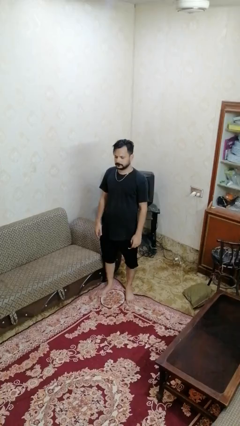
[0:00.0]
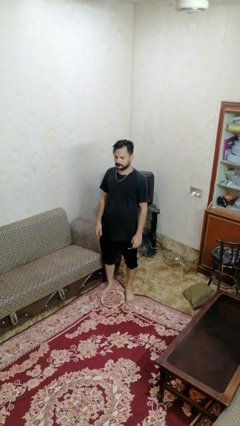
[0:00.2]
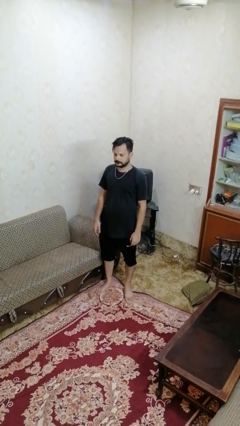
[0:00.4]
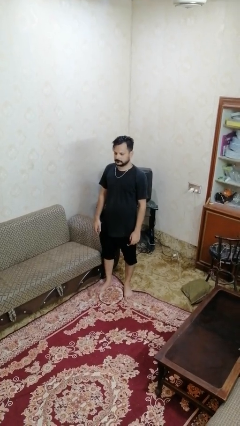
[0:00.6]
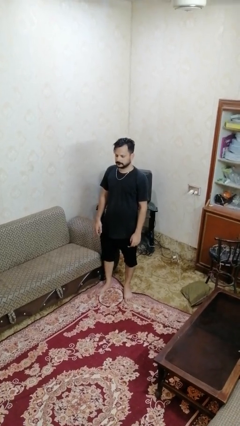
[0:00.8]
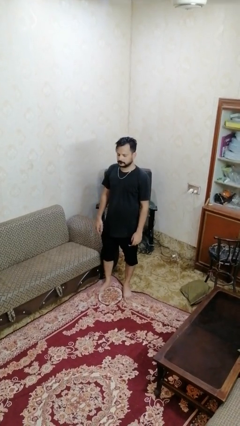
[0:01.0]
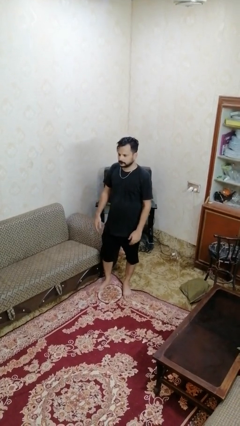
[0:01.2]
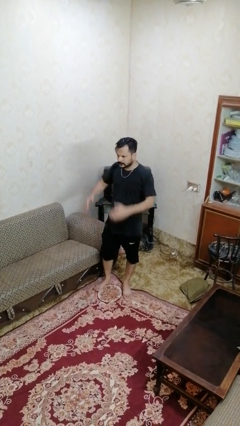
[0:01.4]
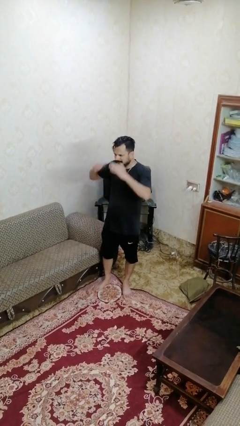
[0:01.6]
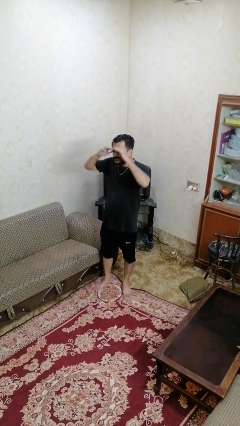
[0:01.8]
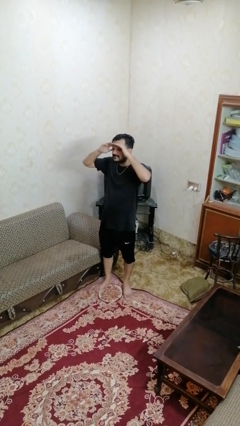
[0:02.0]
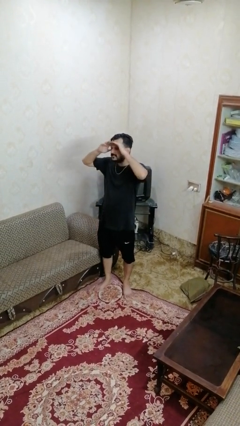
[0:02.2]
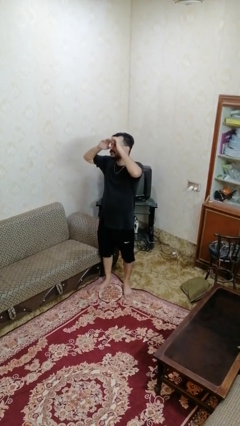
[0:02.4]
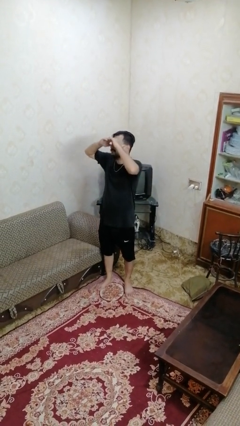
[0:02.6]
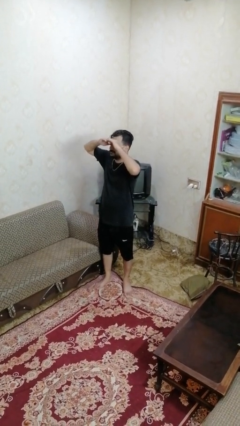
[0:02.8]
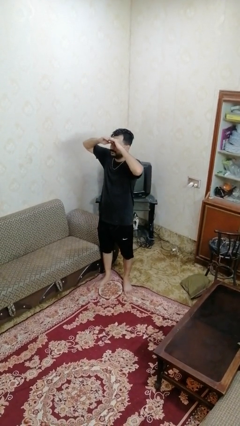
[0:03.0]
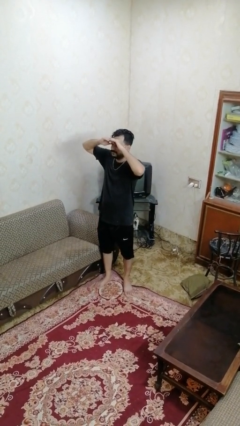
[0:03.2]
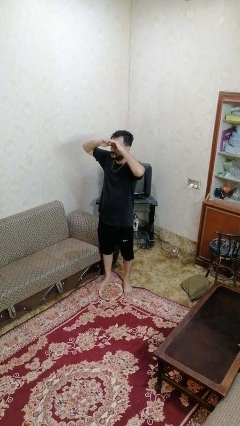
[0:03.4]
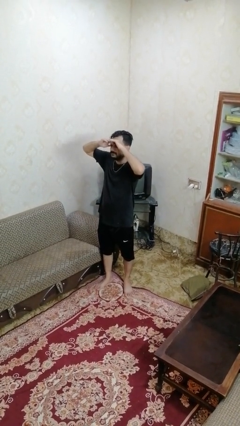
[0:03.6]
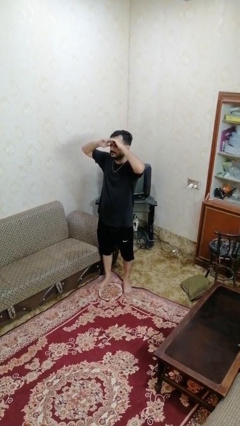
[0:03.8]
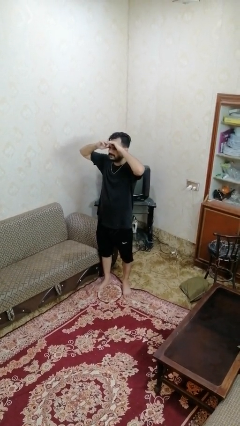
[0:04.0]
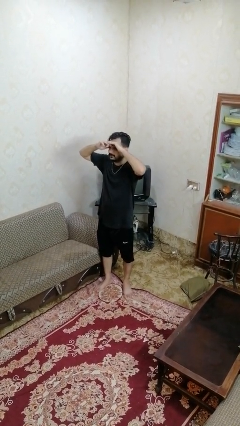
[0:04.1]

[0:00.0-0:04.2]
person shades eyes

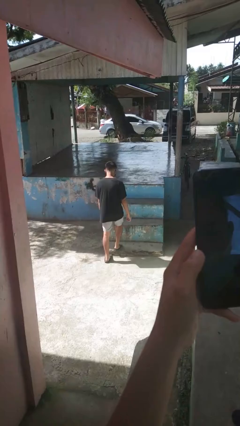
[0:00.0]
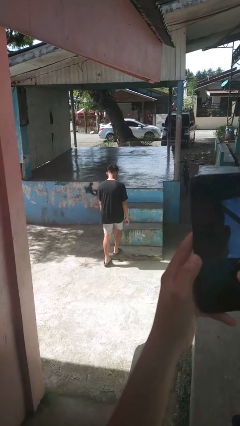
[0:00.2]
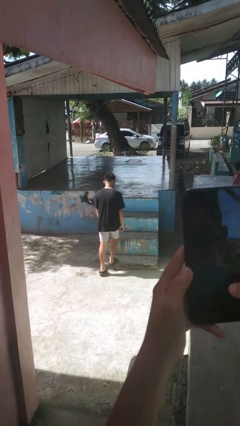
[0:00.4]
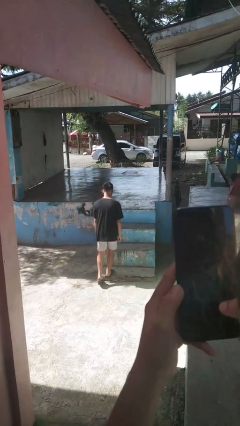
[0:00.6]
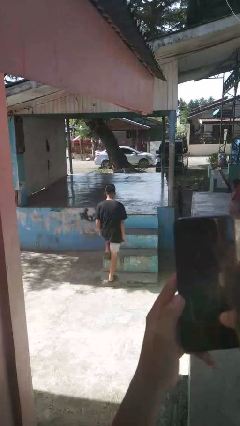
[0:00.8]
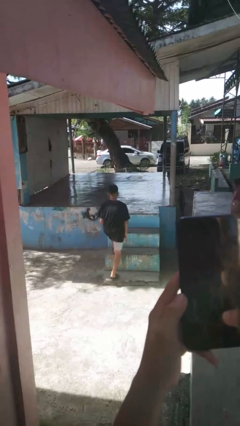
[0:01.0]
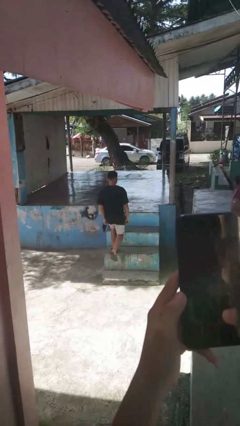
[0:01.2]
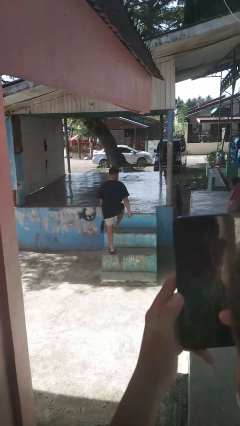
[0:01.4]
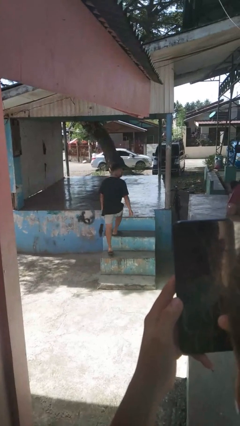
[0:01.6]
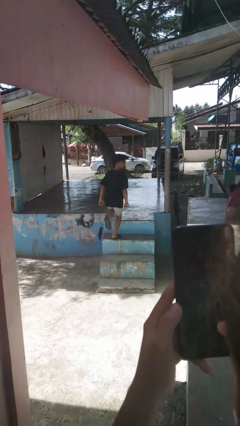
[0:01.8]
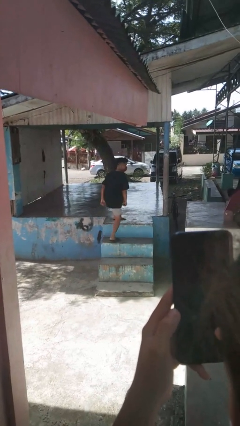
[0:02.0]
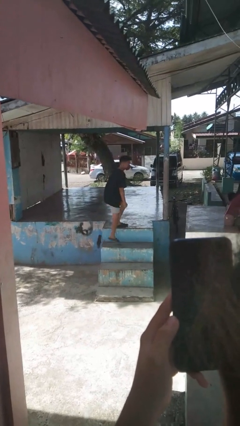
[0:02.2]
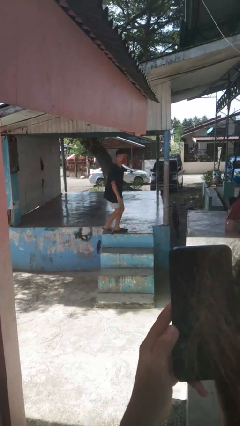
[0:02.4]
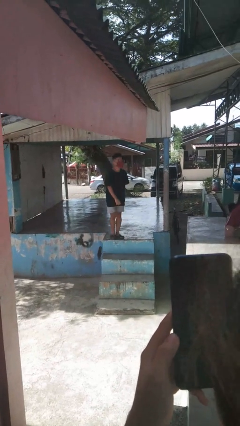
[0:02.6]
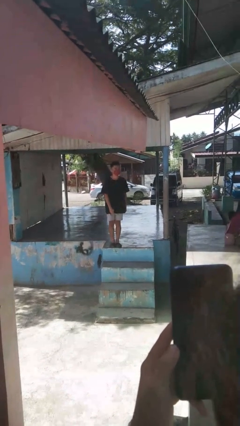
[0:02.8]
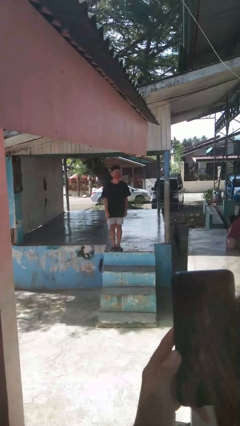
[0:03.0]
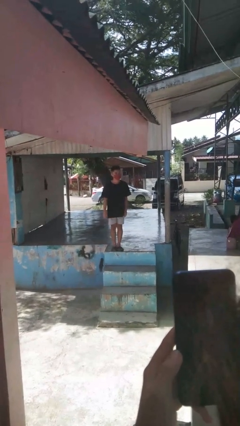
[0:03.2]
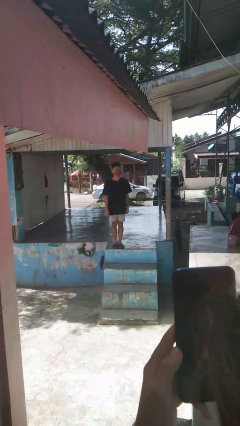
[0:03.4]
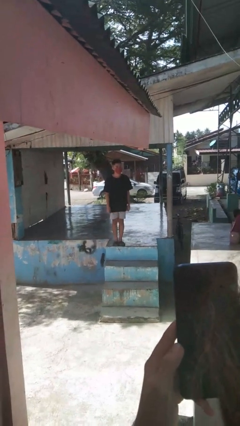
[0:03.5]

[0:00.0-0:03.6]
person climbs up stairs

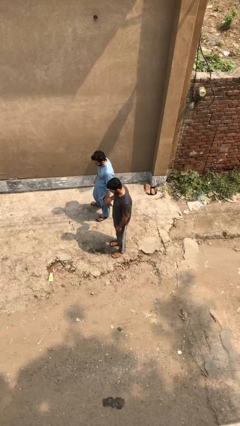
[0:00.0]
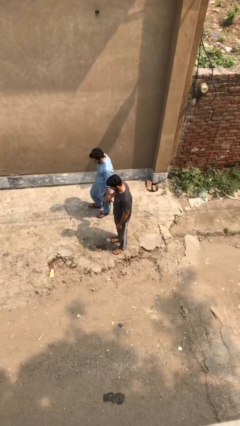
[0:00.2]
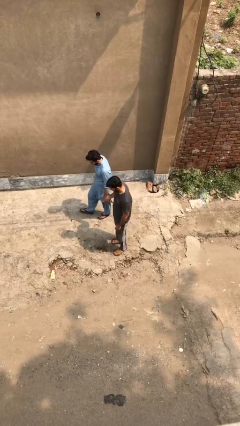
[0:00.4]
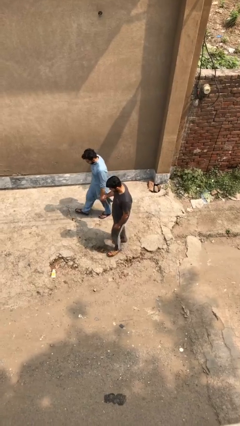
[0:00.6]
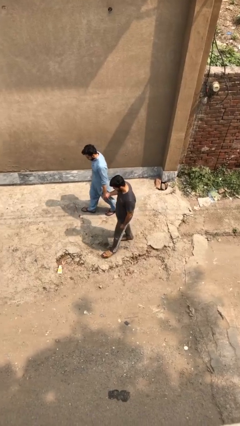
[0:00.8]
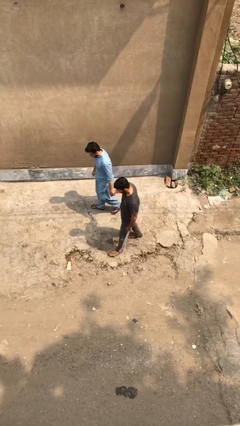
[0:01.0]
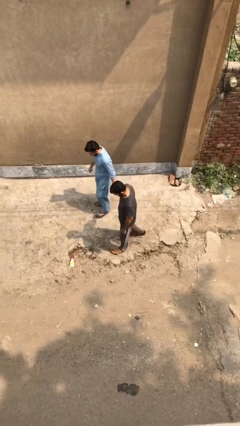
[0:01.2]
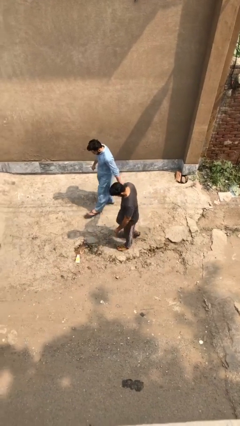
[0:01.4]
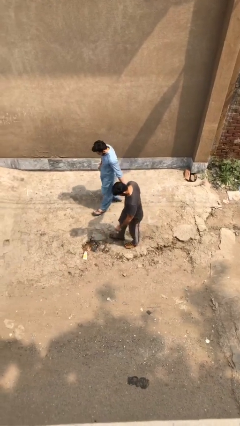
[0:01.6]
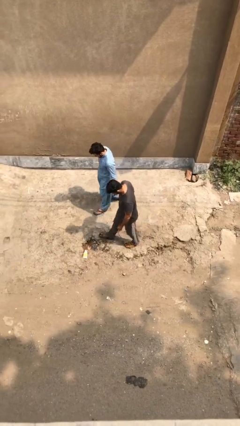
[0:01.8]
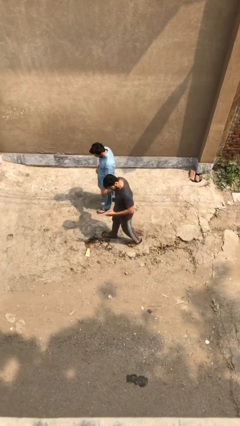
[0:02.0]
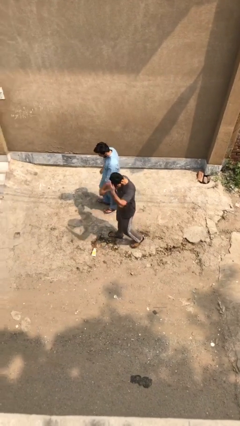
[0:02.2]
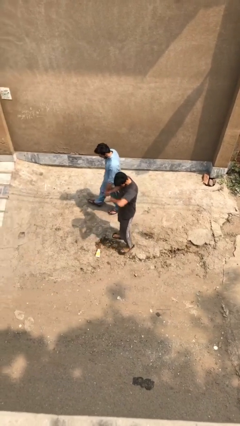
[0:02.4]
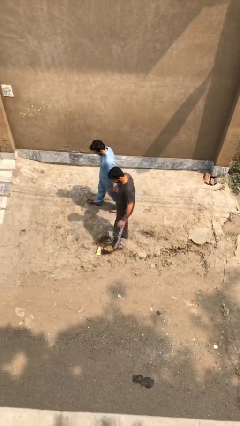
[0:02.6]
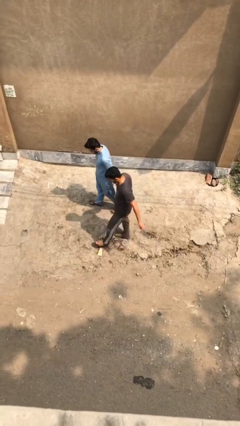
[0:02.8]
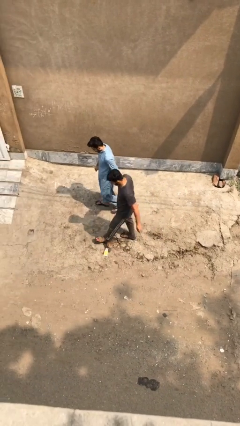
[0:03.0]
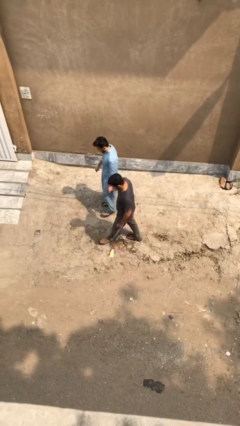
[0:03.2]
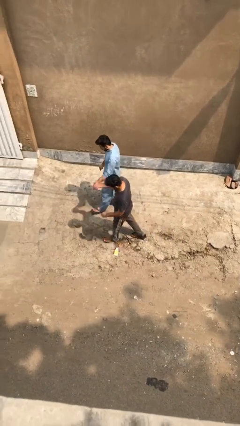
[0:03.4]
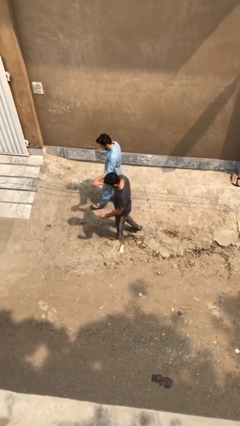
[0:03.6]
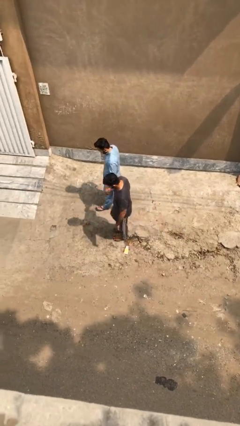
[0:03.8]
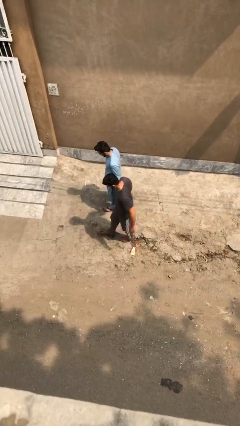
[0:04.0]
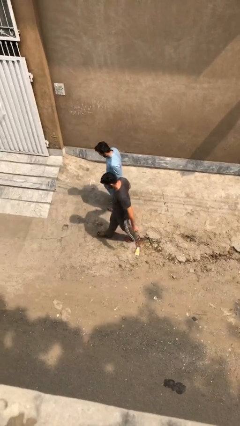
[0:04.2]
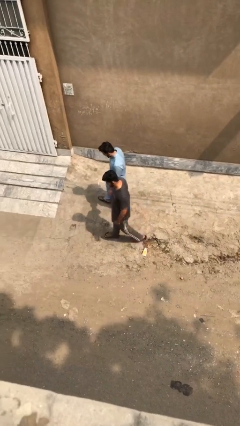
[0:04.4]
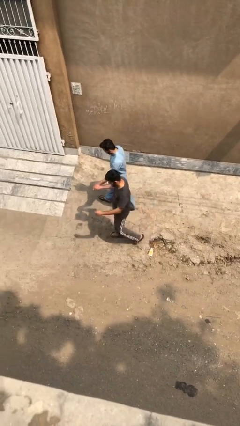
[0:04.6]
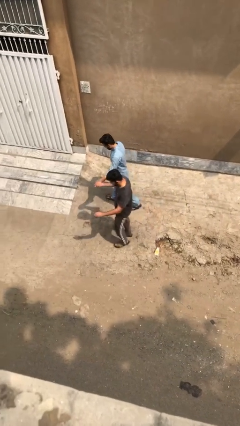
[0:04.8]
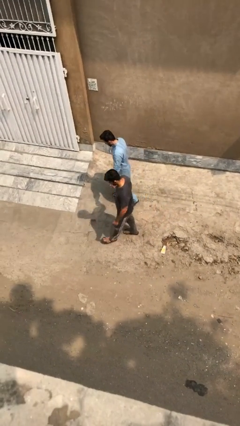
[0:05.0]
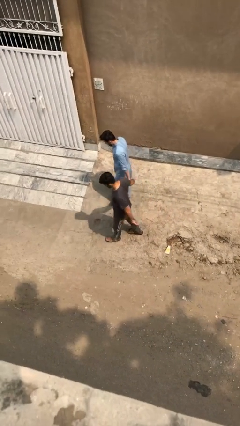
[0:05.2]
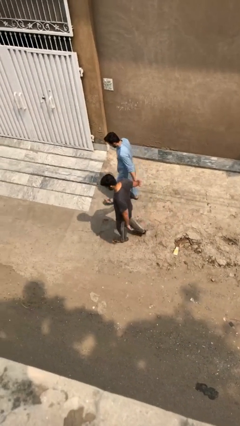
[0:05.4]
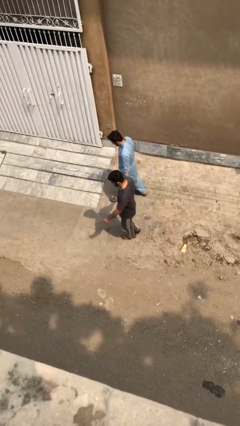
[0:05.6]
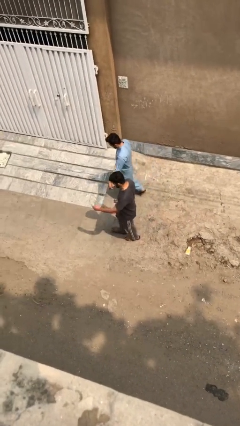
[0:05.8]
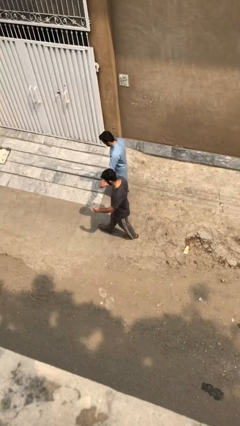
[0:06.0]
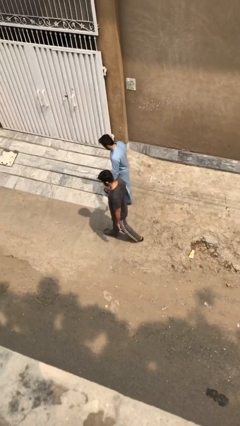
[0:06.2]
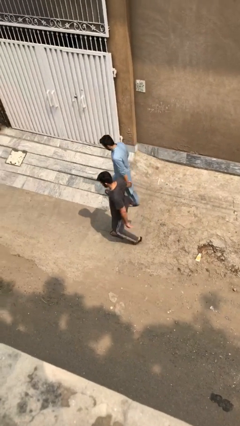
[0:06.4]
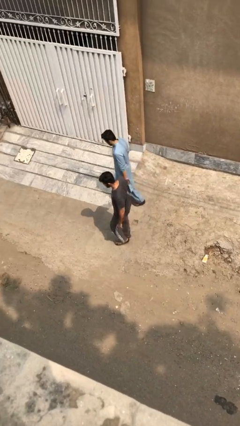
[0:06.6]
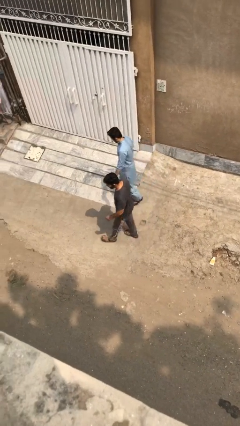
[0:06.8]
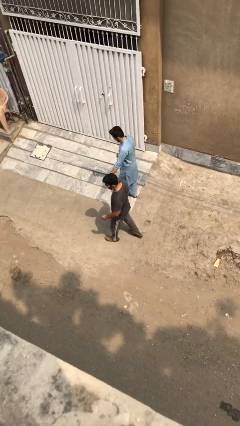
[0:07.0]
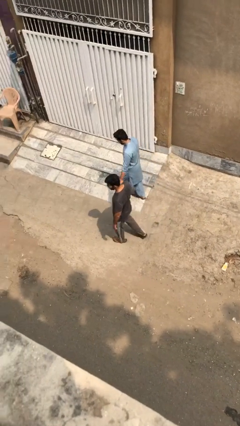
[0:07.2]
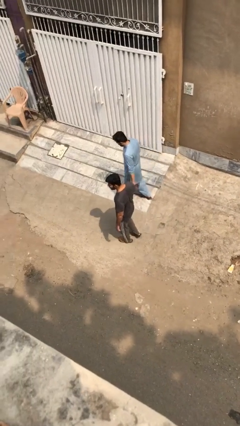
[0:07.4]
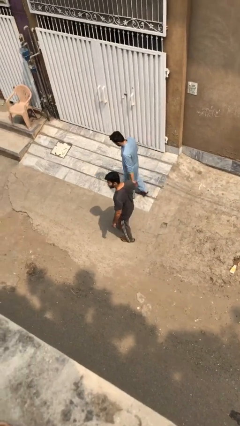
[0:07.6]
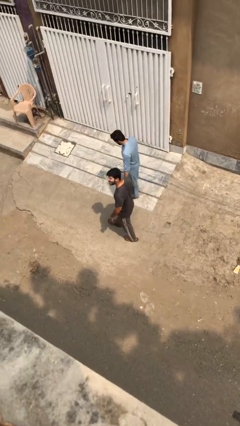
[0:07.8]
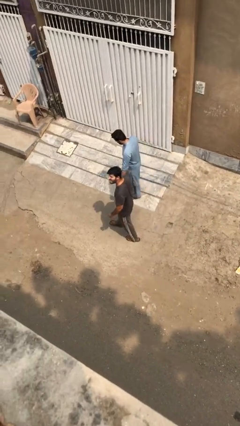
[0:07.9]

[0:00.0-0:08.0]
person holds hand

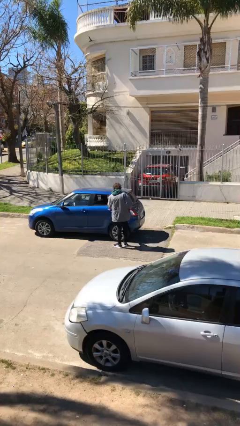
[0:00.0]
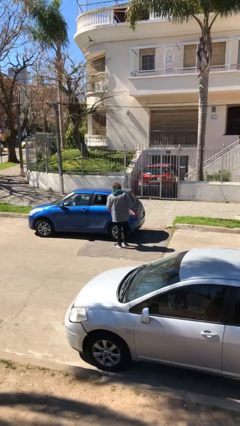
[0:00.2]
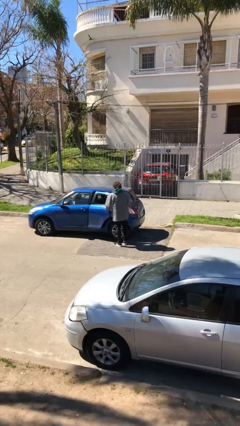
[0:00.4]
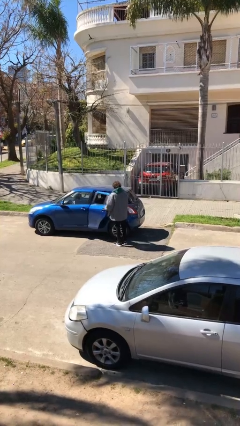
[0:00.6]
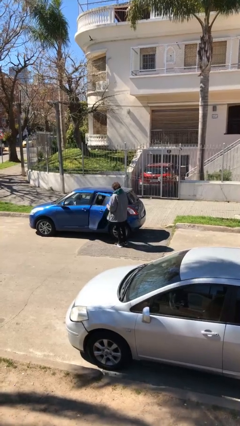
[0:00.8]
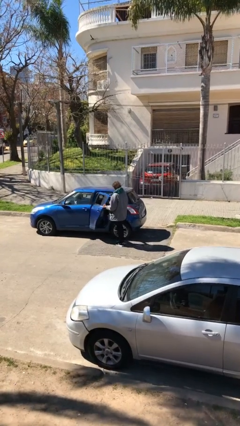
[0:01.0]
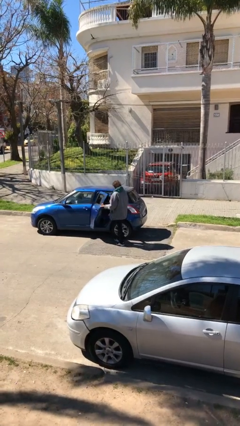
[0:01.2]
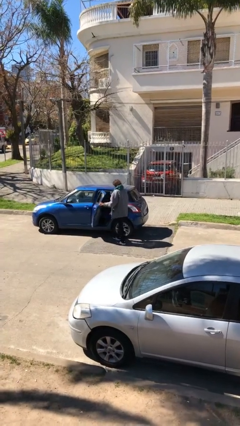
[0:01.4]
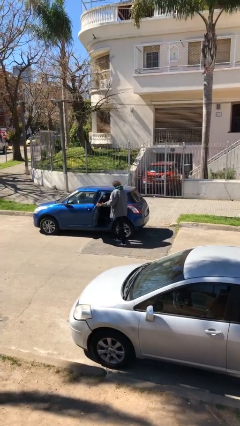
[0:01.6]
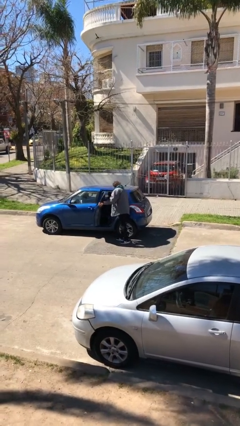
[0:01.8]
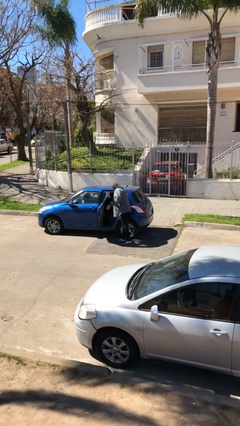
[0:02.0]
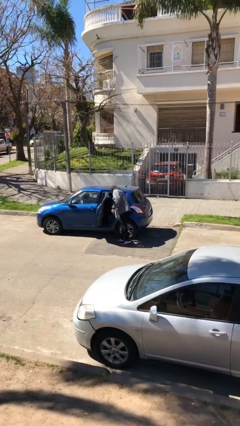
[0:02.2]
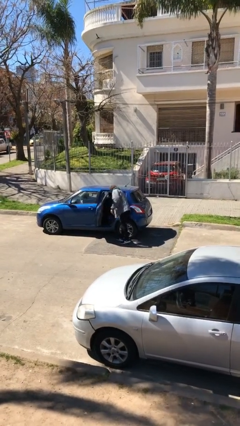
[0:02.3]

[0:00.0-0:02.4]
person opens car door
